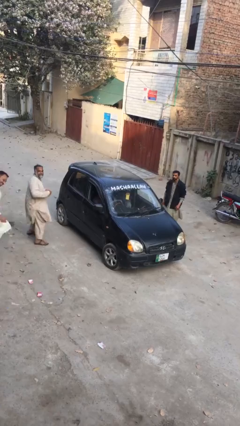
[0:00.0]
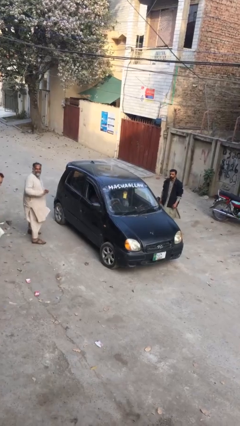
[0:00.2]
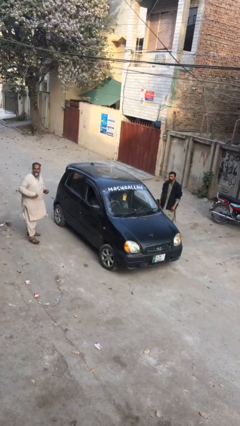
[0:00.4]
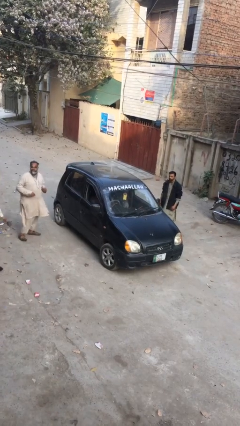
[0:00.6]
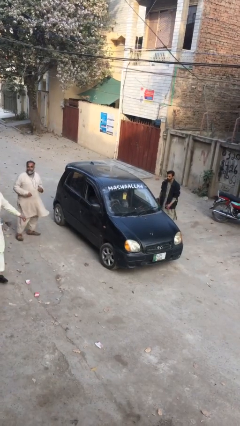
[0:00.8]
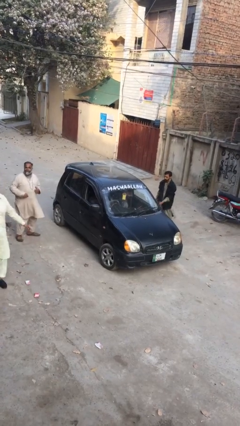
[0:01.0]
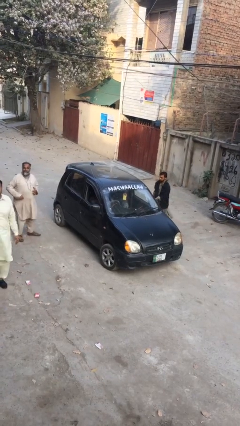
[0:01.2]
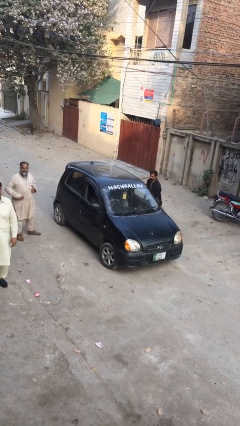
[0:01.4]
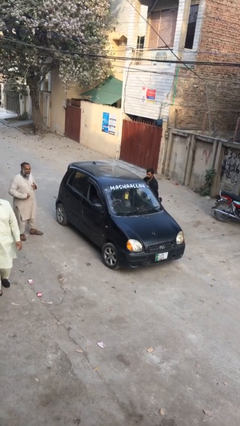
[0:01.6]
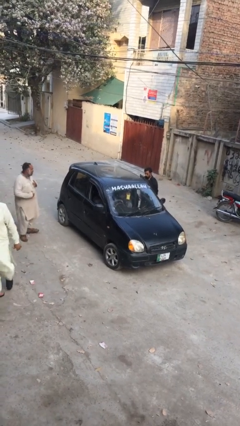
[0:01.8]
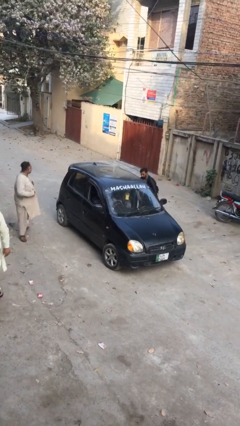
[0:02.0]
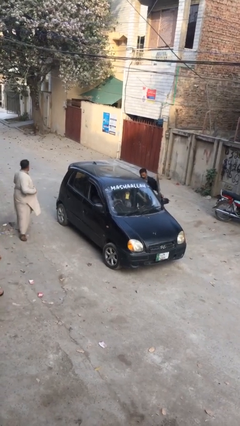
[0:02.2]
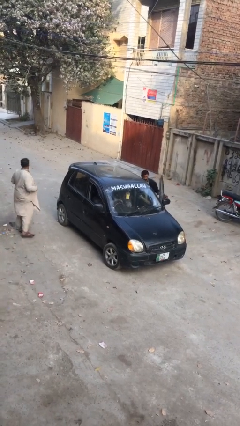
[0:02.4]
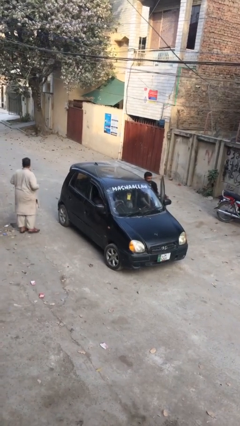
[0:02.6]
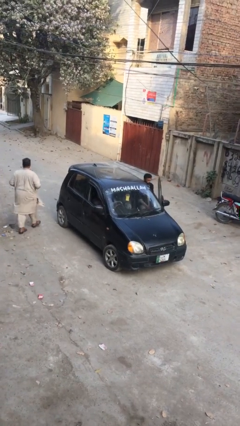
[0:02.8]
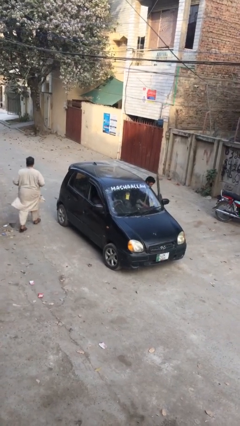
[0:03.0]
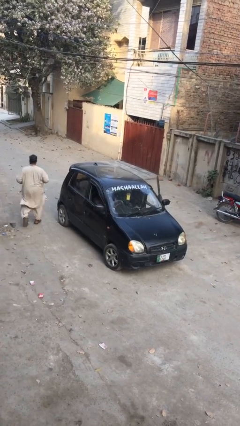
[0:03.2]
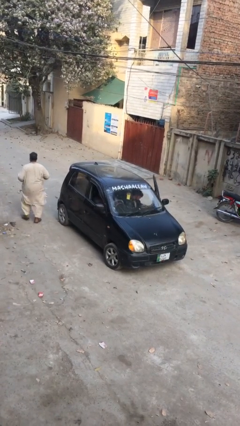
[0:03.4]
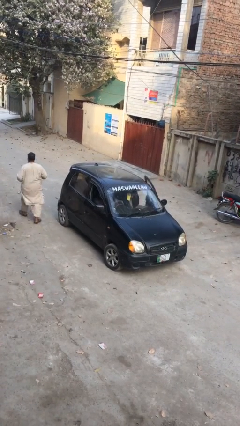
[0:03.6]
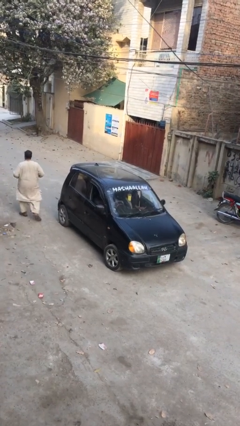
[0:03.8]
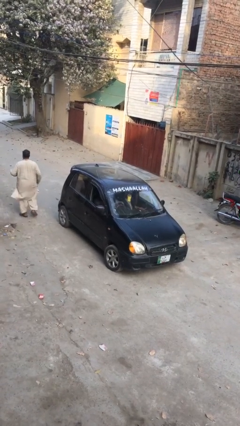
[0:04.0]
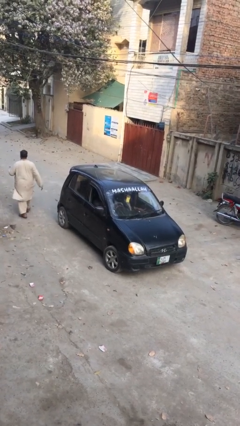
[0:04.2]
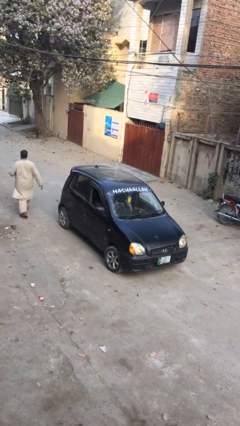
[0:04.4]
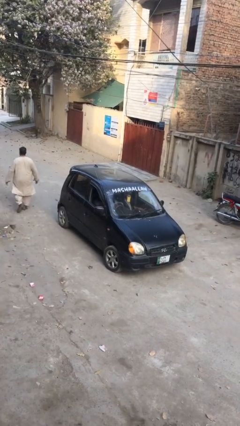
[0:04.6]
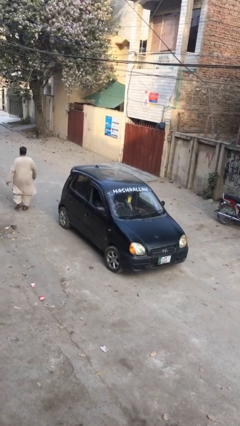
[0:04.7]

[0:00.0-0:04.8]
person enters car

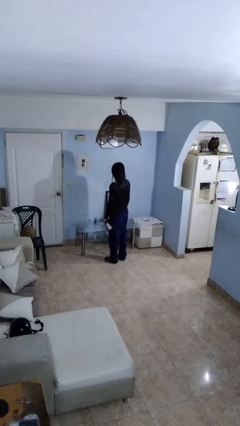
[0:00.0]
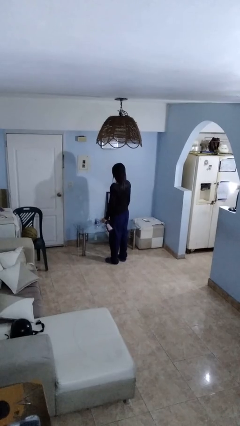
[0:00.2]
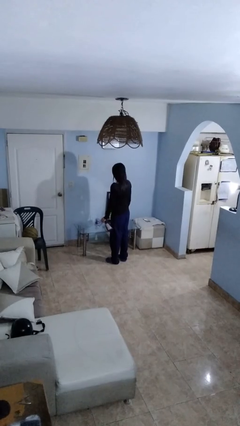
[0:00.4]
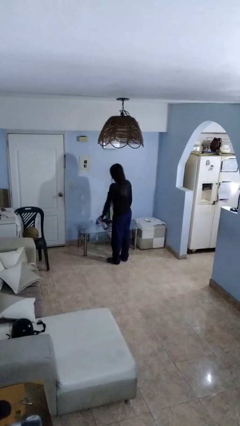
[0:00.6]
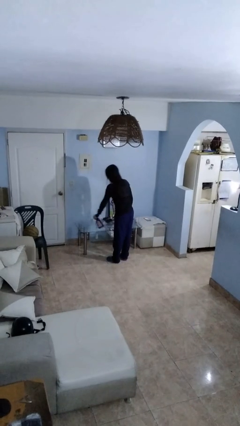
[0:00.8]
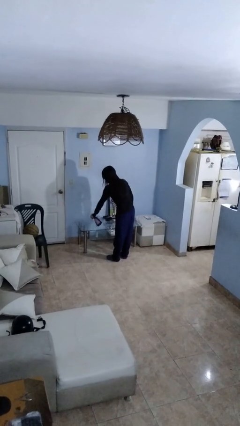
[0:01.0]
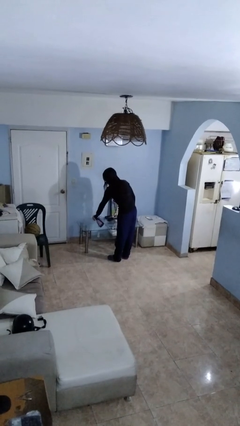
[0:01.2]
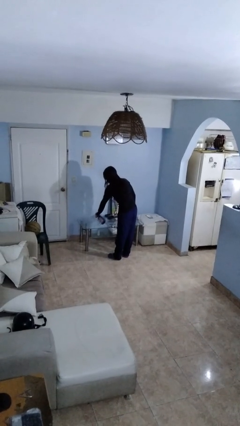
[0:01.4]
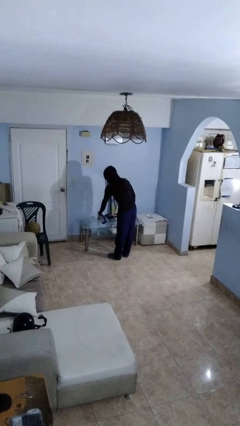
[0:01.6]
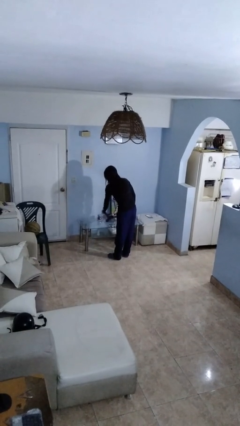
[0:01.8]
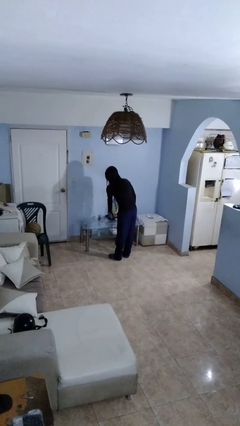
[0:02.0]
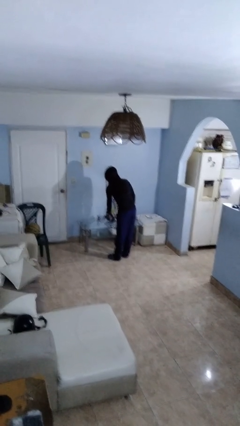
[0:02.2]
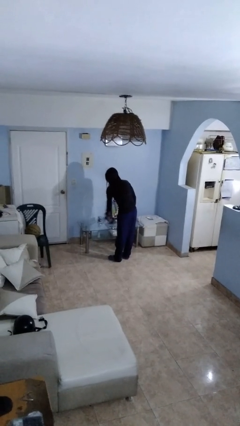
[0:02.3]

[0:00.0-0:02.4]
person sprays from bottle

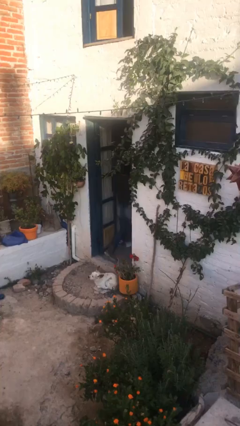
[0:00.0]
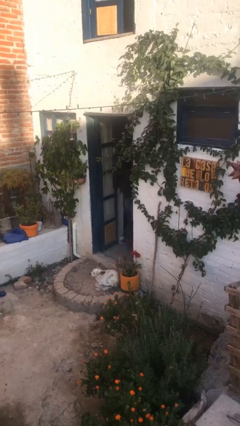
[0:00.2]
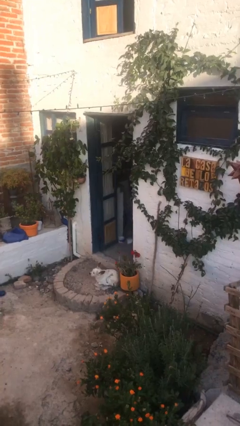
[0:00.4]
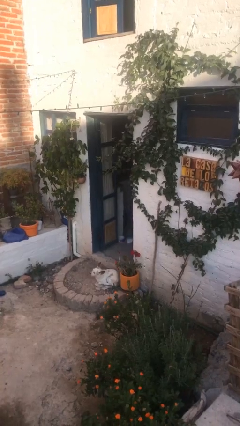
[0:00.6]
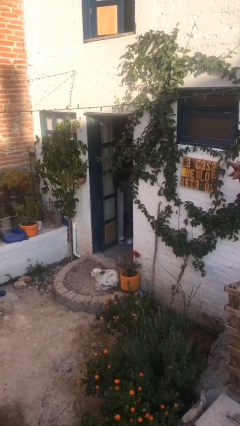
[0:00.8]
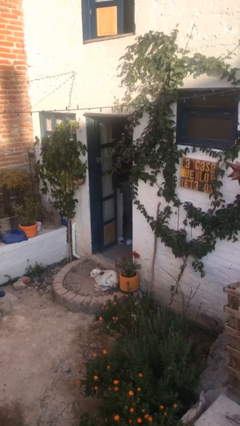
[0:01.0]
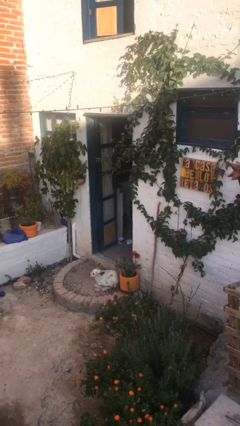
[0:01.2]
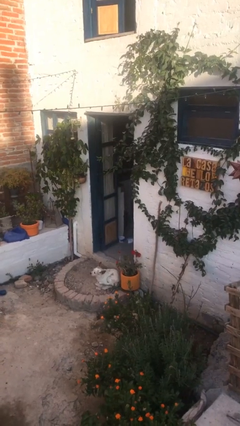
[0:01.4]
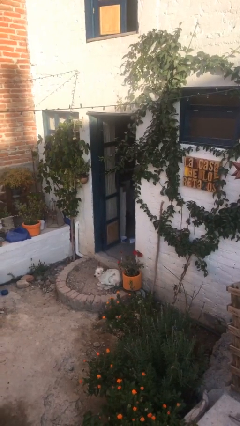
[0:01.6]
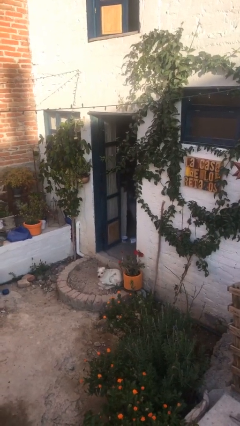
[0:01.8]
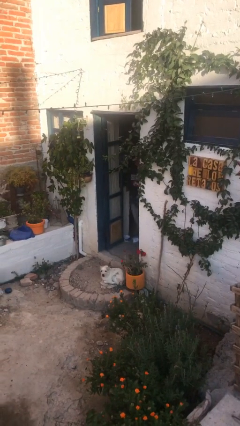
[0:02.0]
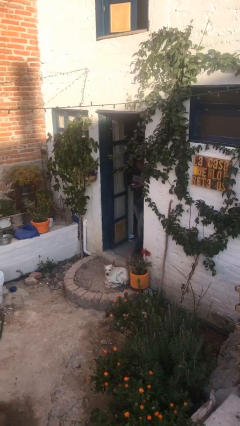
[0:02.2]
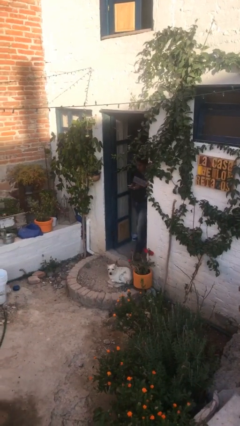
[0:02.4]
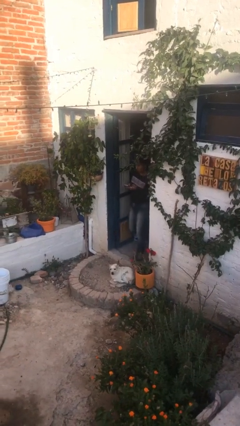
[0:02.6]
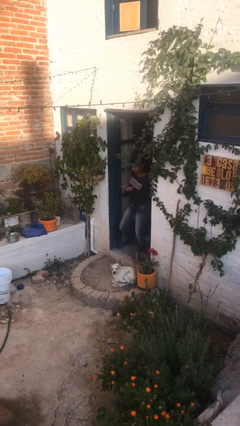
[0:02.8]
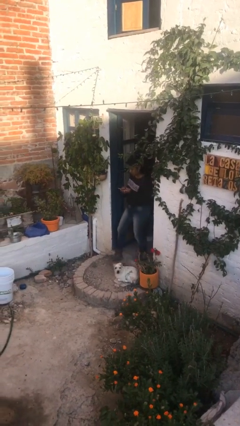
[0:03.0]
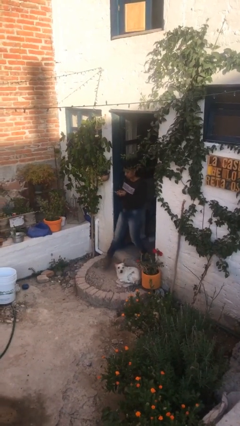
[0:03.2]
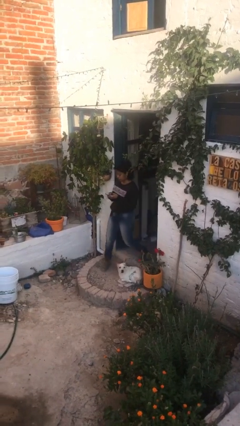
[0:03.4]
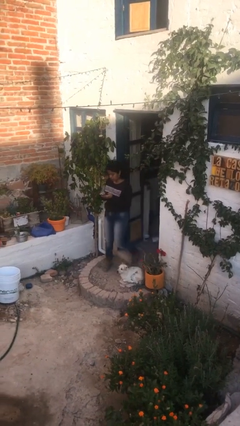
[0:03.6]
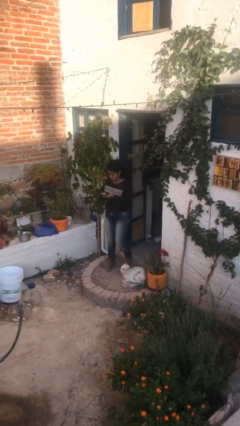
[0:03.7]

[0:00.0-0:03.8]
person enters scene through structure

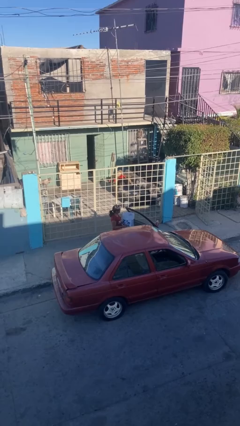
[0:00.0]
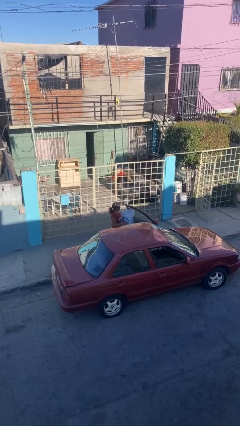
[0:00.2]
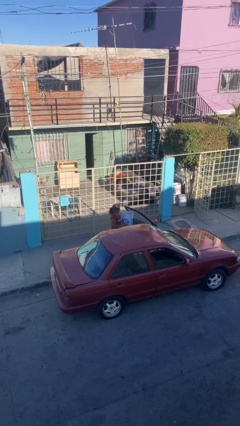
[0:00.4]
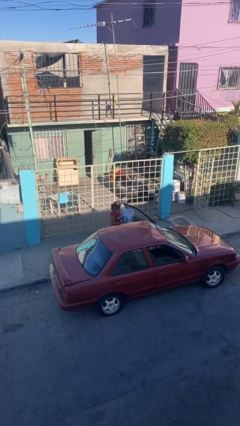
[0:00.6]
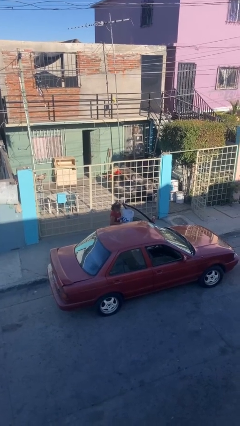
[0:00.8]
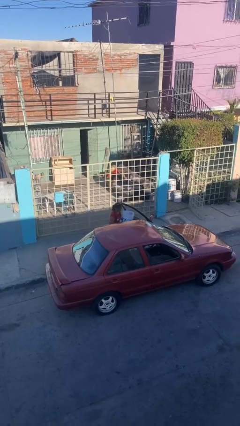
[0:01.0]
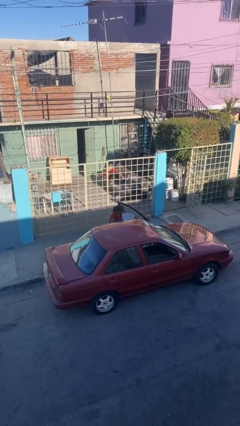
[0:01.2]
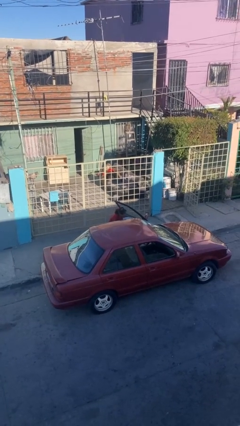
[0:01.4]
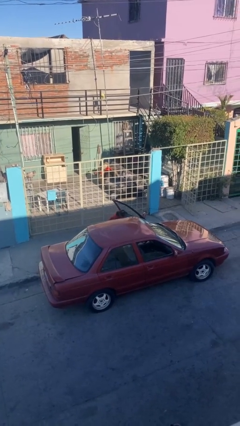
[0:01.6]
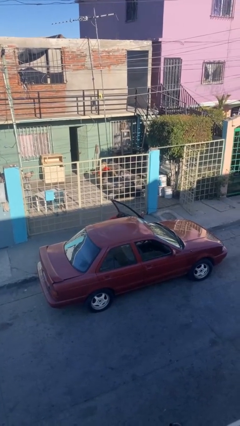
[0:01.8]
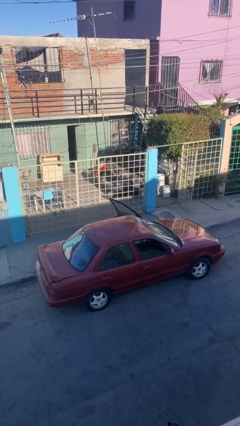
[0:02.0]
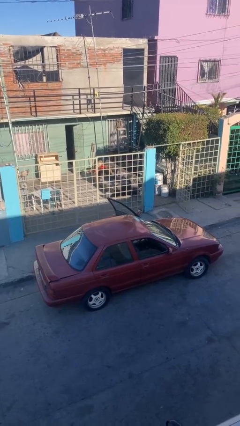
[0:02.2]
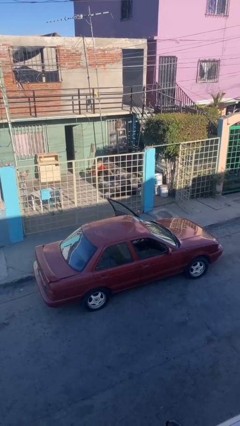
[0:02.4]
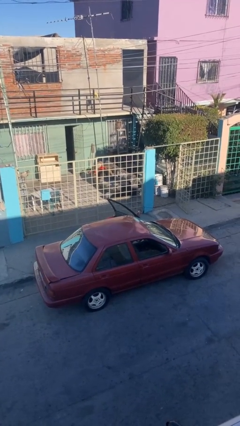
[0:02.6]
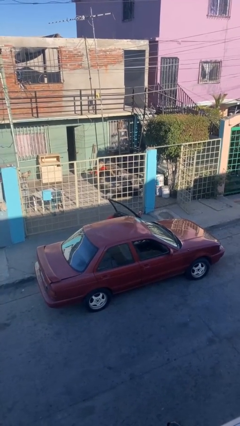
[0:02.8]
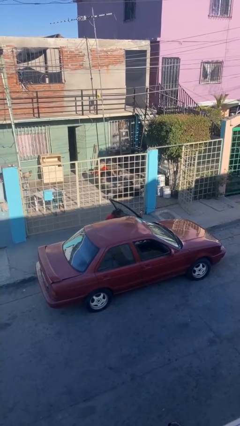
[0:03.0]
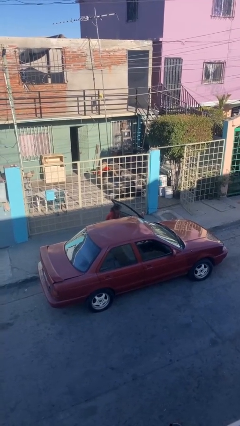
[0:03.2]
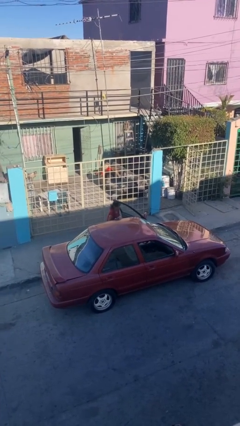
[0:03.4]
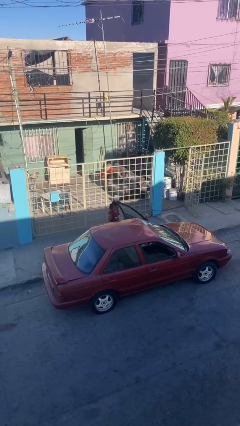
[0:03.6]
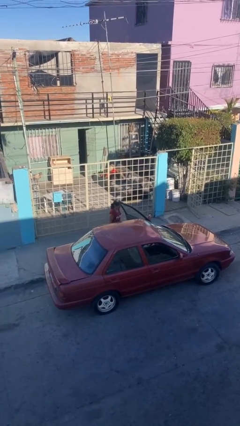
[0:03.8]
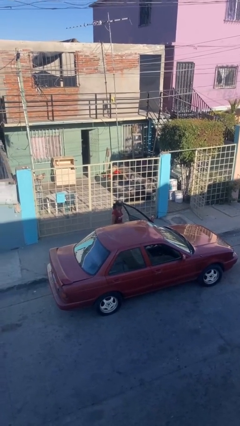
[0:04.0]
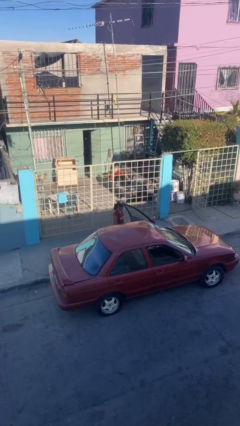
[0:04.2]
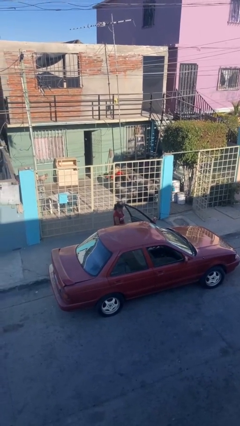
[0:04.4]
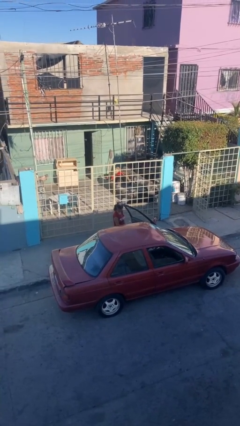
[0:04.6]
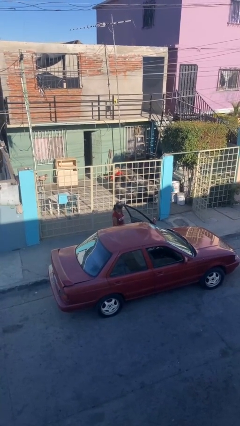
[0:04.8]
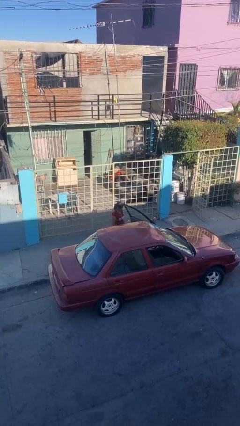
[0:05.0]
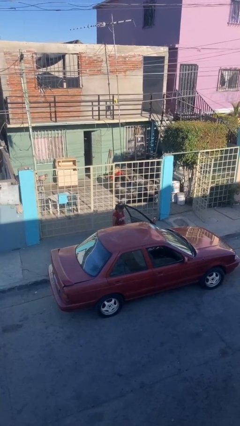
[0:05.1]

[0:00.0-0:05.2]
person loads car

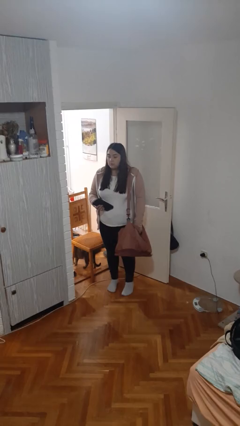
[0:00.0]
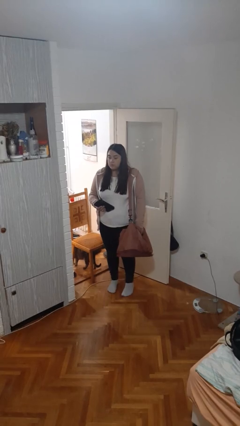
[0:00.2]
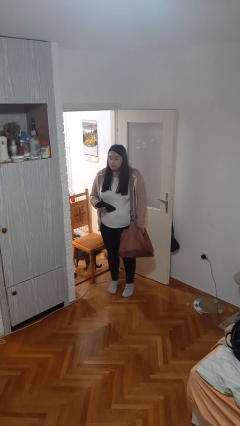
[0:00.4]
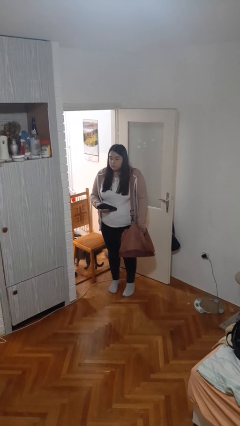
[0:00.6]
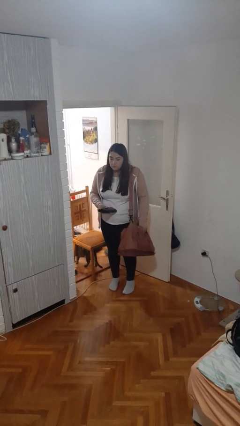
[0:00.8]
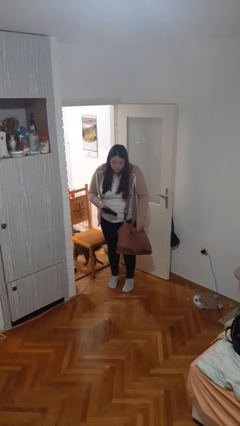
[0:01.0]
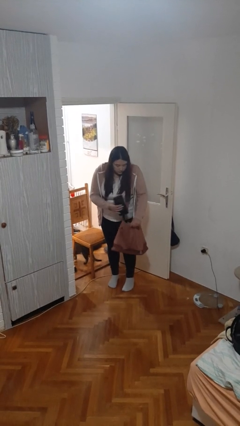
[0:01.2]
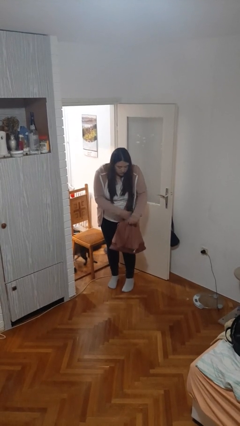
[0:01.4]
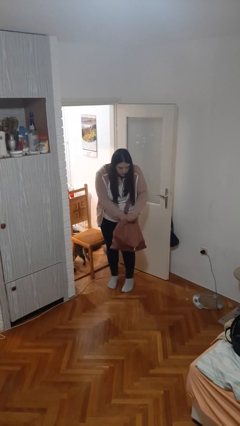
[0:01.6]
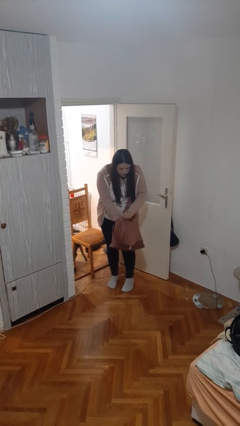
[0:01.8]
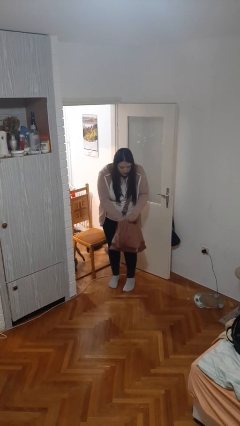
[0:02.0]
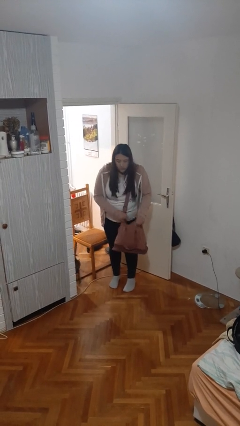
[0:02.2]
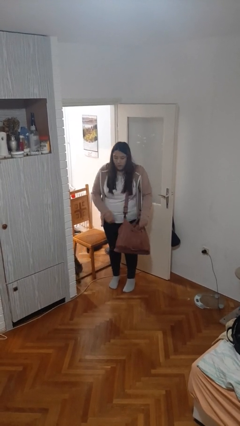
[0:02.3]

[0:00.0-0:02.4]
person puts object into purse
